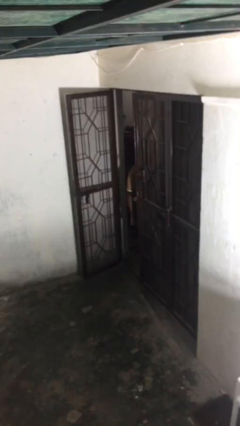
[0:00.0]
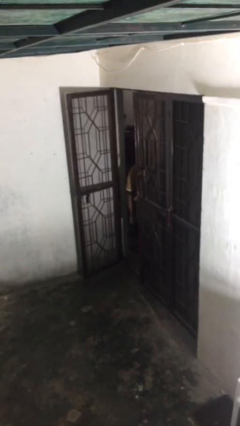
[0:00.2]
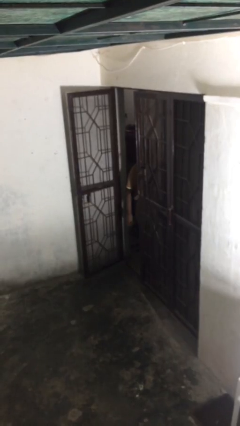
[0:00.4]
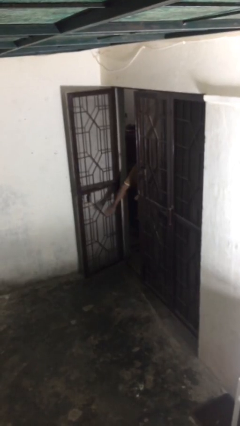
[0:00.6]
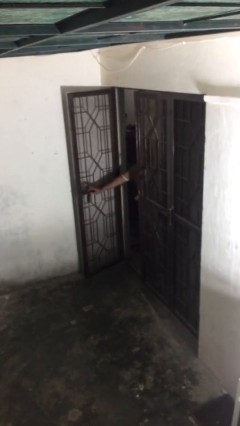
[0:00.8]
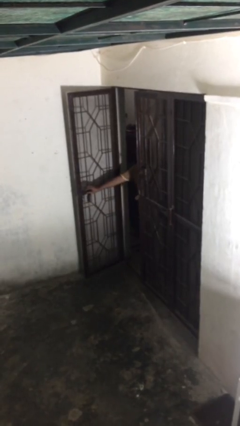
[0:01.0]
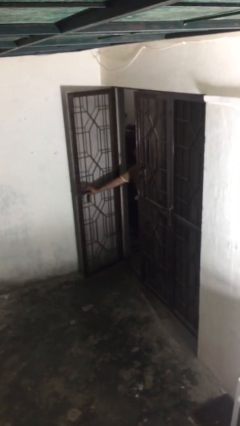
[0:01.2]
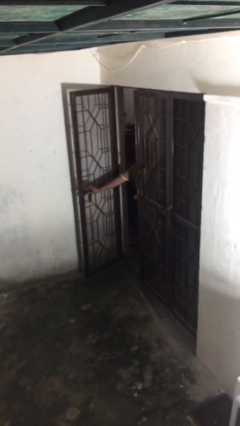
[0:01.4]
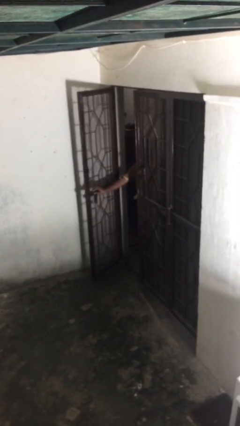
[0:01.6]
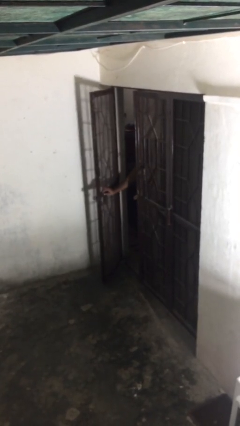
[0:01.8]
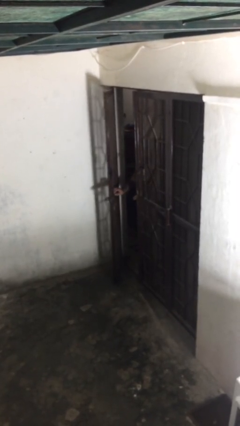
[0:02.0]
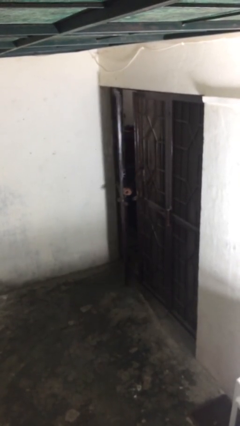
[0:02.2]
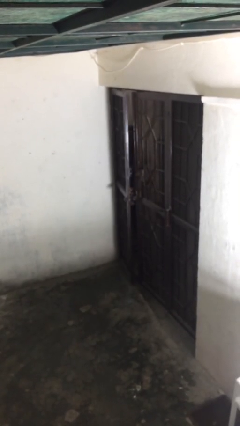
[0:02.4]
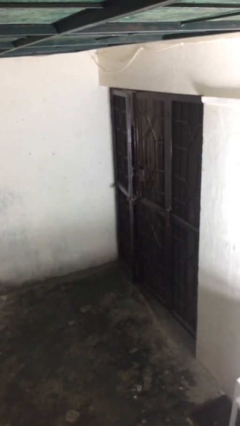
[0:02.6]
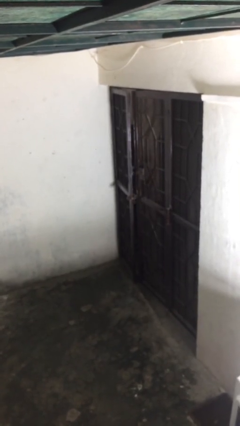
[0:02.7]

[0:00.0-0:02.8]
person closes facility door

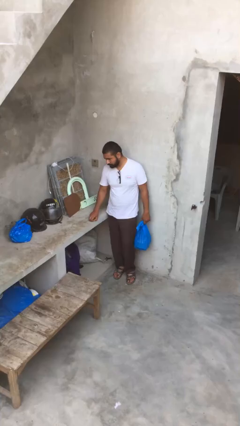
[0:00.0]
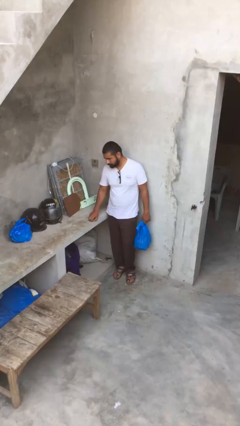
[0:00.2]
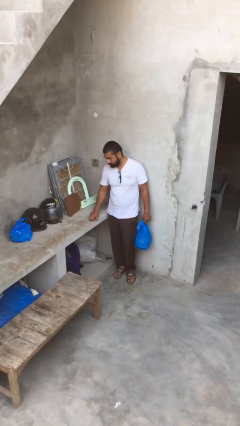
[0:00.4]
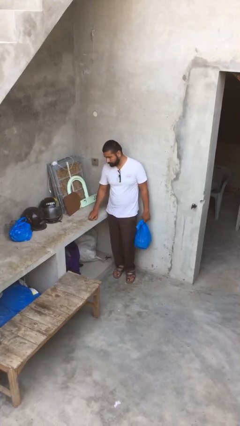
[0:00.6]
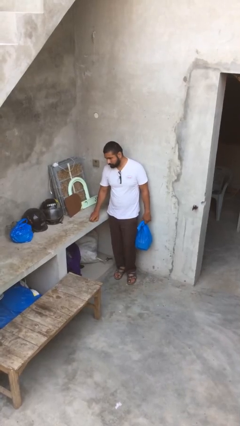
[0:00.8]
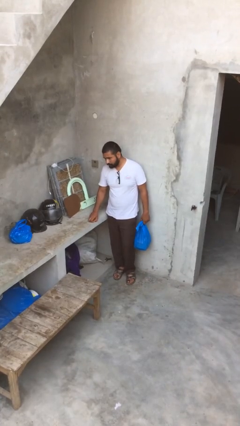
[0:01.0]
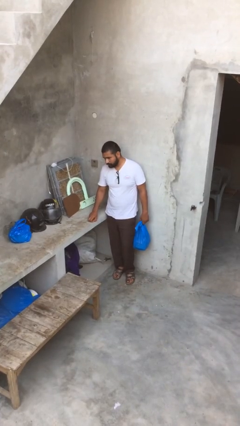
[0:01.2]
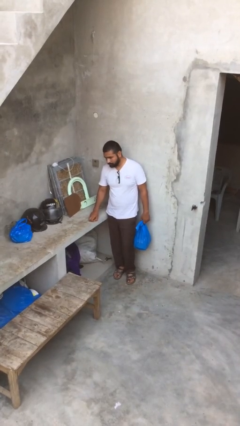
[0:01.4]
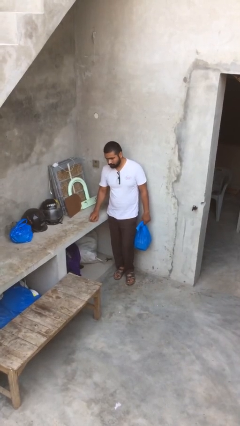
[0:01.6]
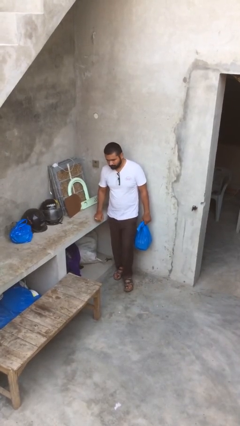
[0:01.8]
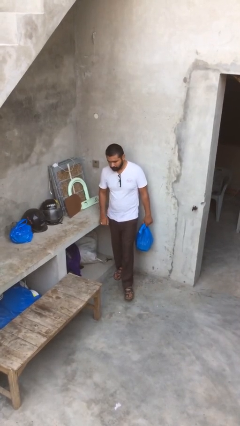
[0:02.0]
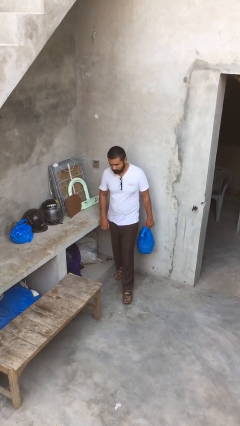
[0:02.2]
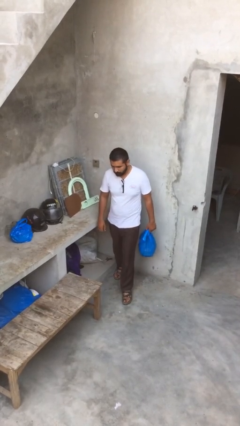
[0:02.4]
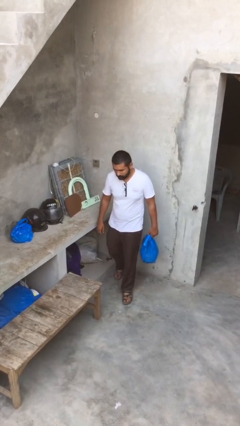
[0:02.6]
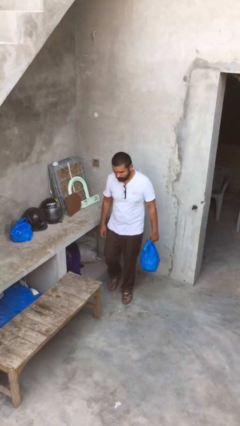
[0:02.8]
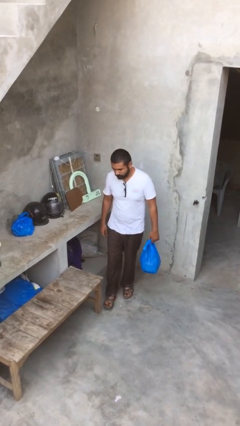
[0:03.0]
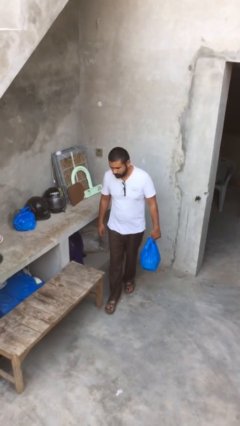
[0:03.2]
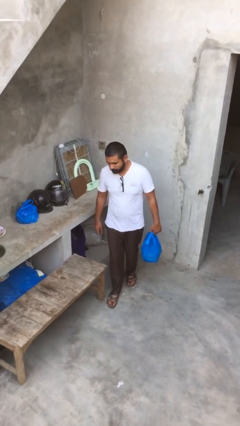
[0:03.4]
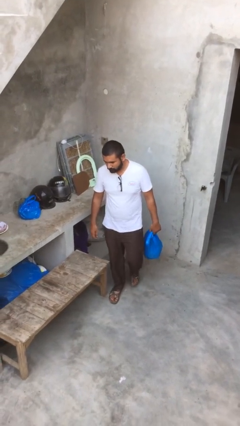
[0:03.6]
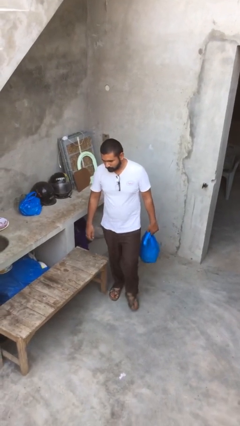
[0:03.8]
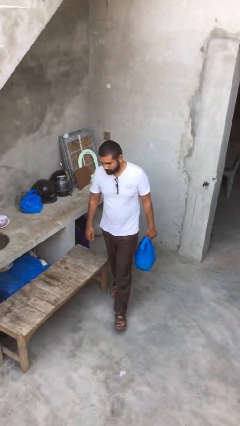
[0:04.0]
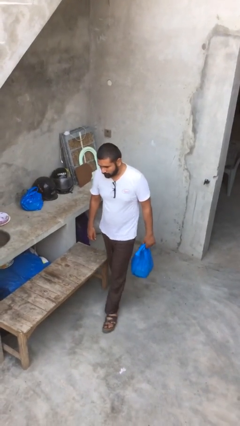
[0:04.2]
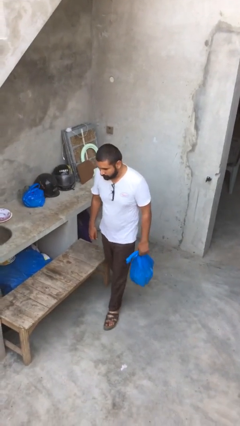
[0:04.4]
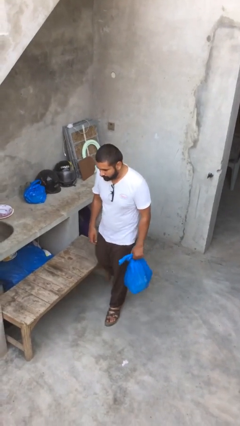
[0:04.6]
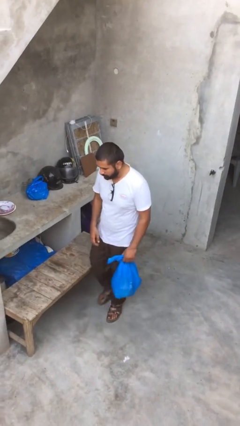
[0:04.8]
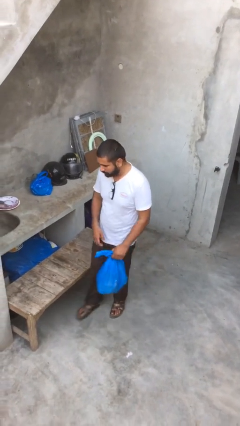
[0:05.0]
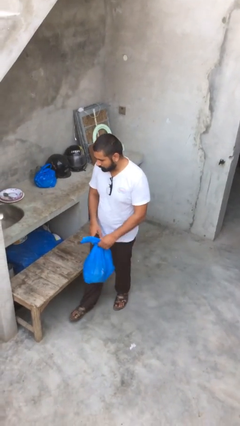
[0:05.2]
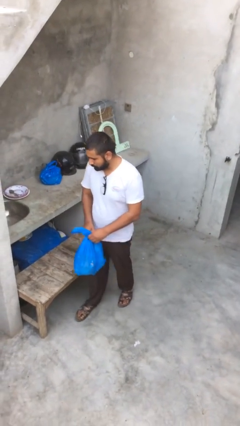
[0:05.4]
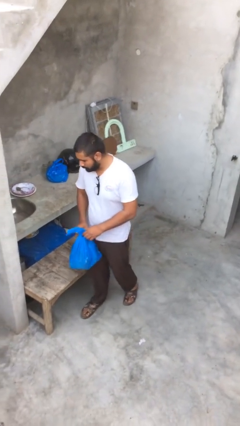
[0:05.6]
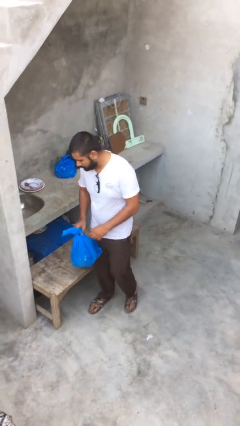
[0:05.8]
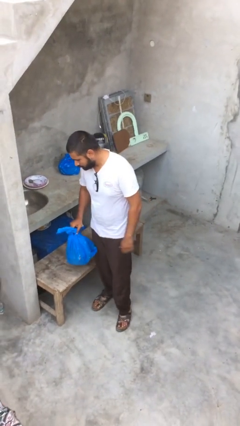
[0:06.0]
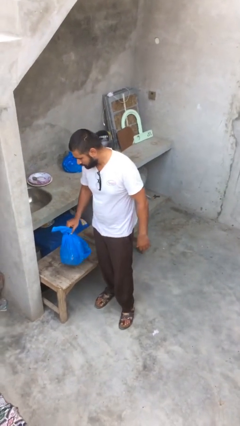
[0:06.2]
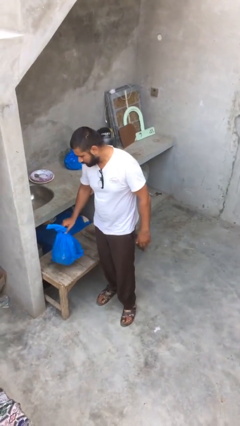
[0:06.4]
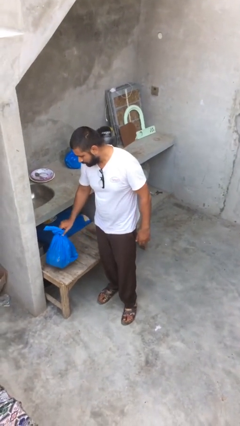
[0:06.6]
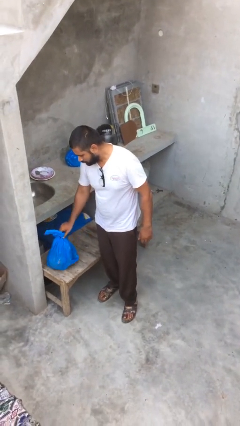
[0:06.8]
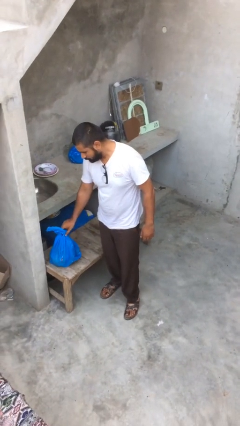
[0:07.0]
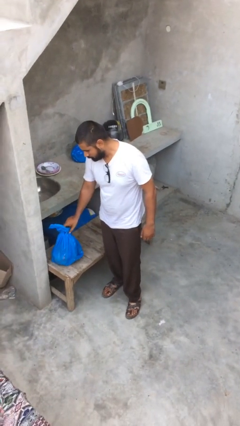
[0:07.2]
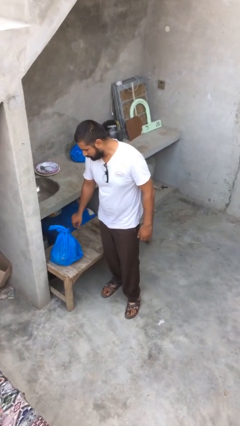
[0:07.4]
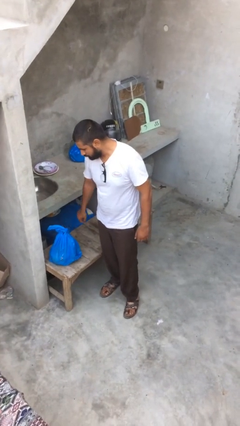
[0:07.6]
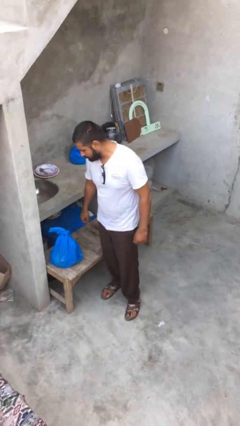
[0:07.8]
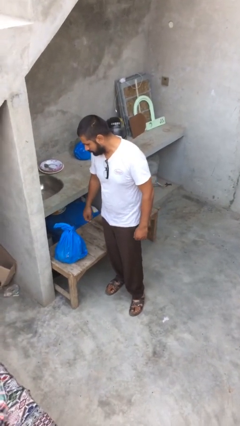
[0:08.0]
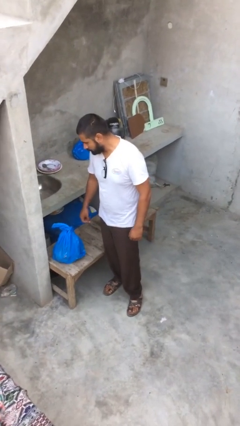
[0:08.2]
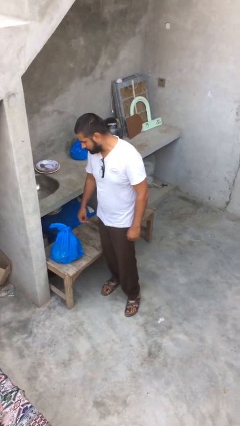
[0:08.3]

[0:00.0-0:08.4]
person puts down object on table

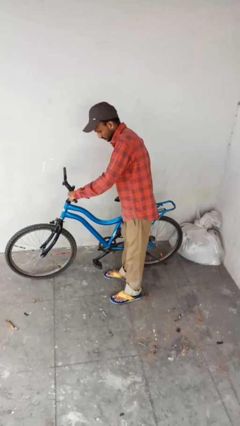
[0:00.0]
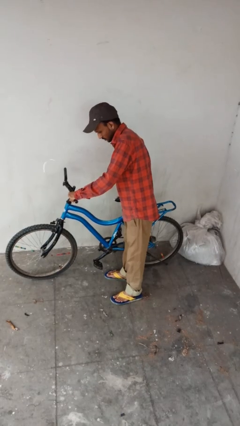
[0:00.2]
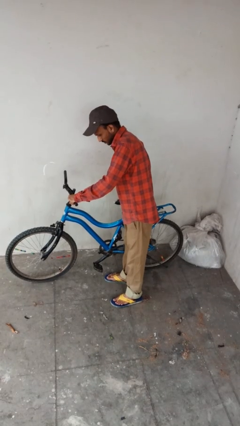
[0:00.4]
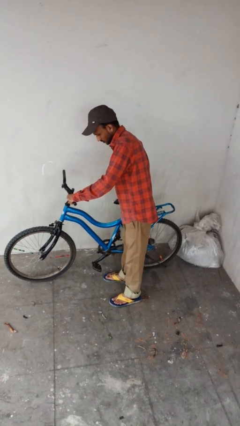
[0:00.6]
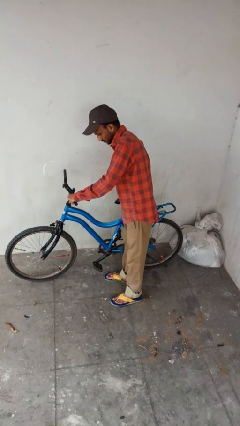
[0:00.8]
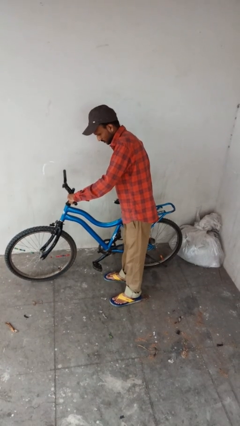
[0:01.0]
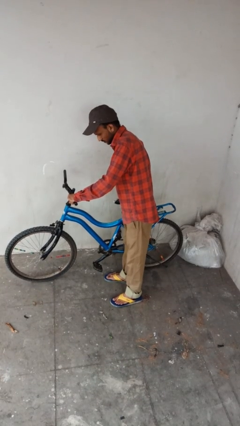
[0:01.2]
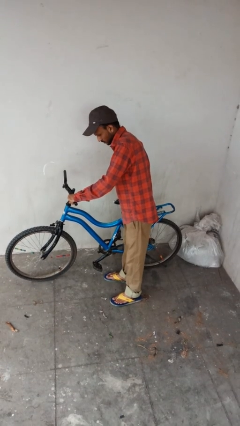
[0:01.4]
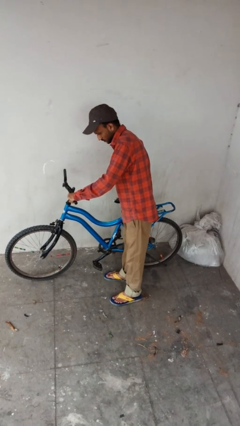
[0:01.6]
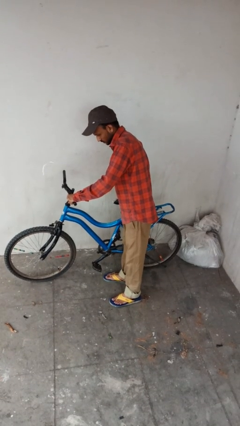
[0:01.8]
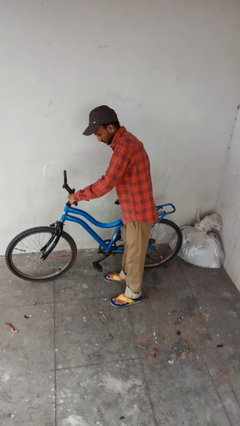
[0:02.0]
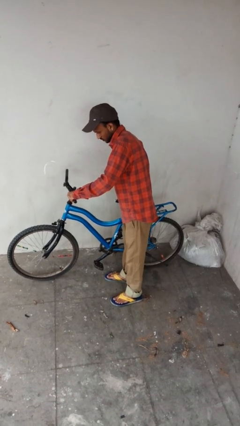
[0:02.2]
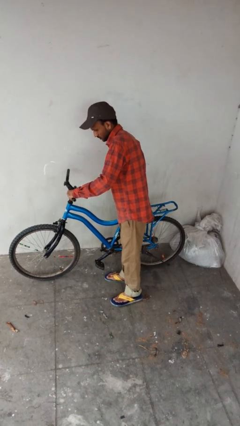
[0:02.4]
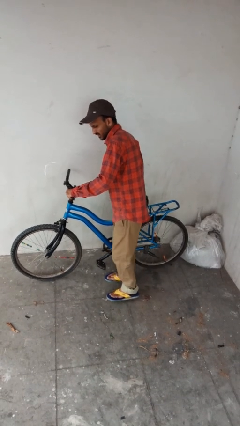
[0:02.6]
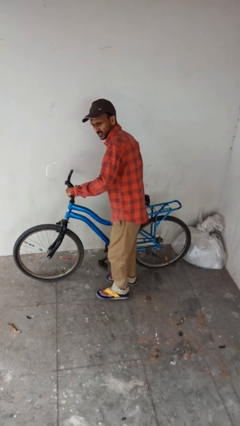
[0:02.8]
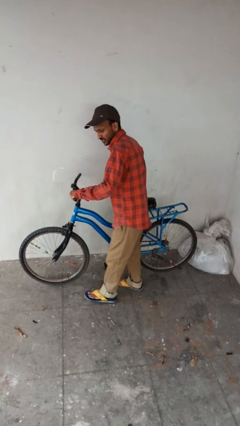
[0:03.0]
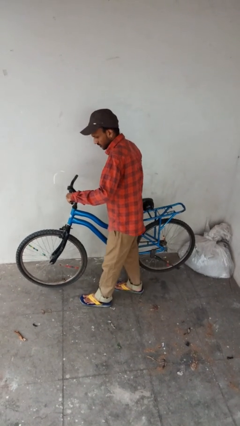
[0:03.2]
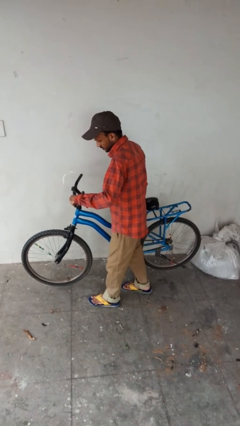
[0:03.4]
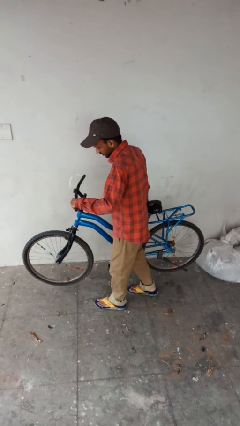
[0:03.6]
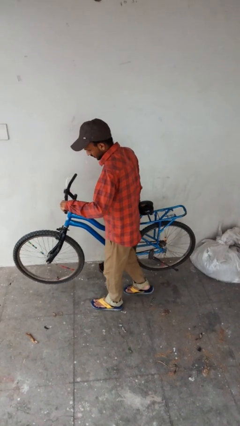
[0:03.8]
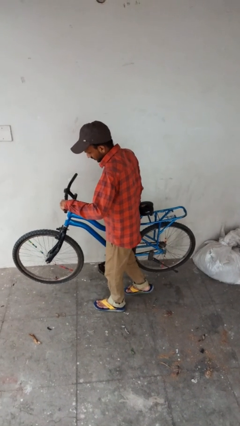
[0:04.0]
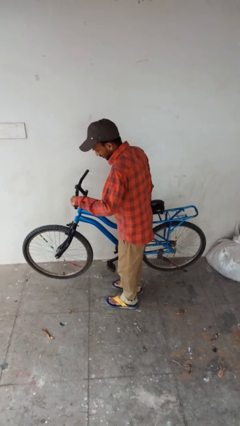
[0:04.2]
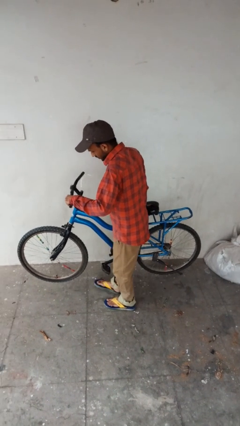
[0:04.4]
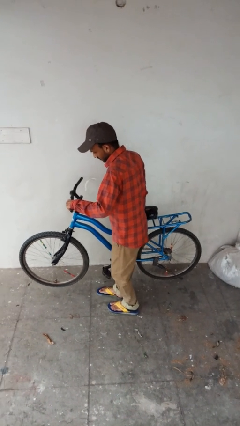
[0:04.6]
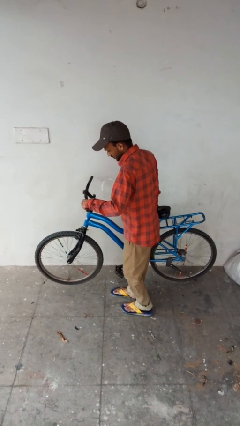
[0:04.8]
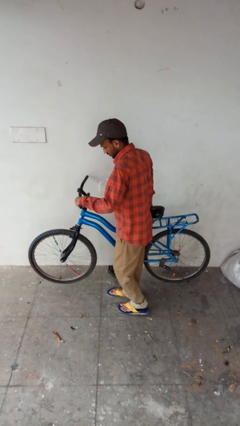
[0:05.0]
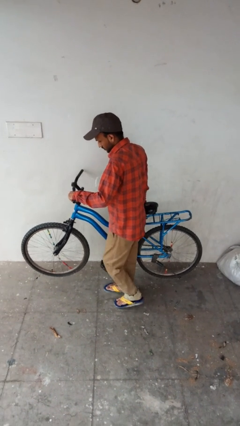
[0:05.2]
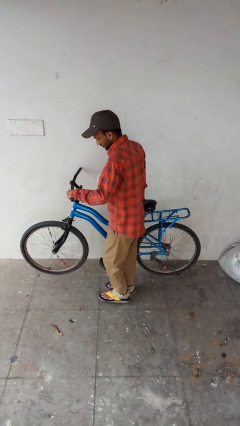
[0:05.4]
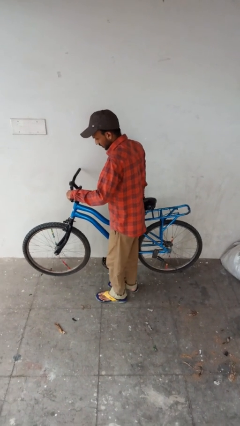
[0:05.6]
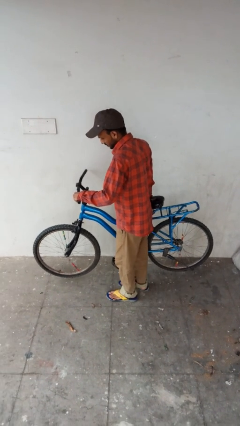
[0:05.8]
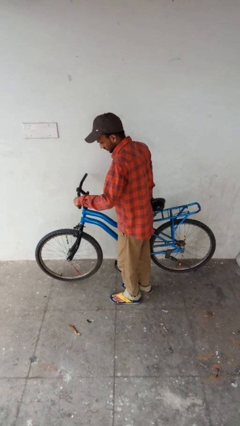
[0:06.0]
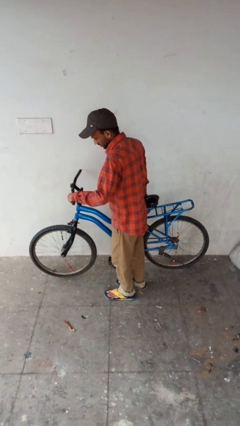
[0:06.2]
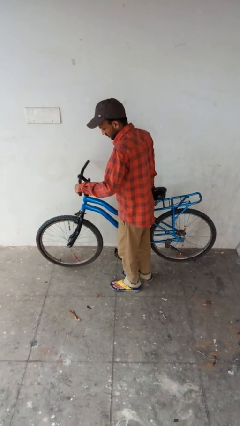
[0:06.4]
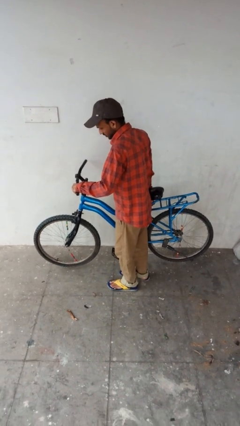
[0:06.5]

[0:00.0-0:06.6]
person carries bicycle
